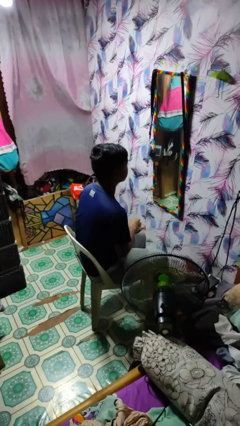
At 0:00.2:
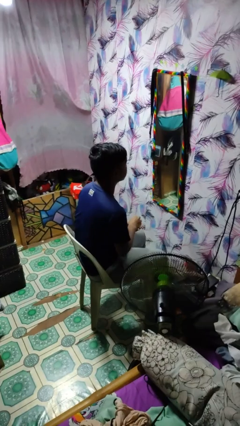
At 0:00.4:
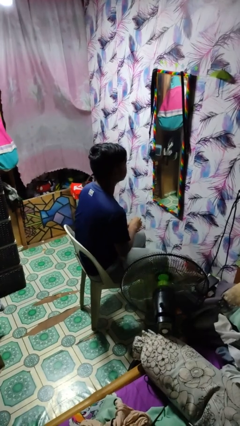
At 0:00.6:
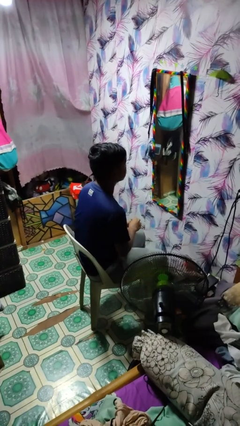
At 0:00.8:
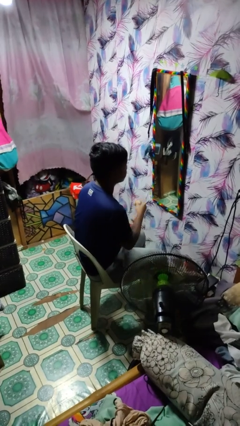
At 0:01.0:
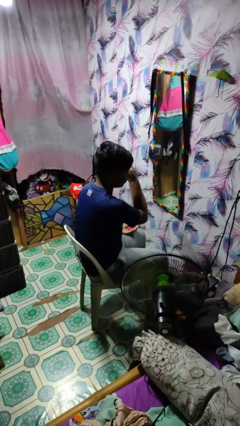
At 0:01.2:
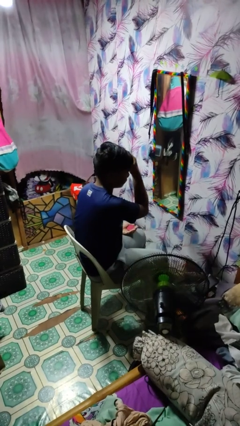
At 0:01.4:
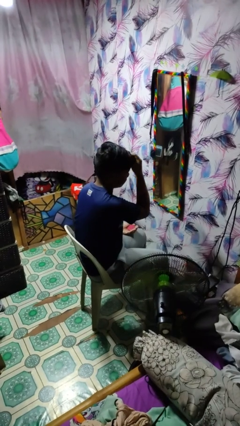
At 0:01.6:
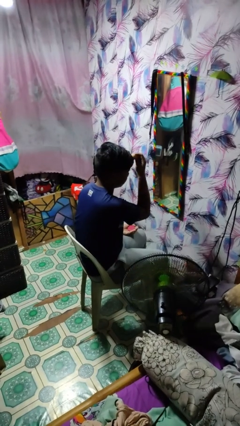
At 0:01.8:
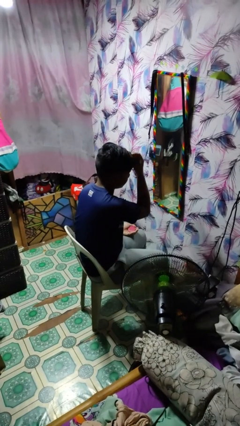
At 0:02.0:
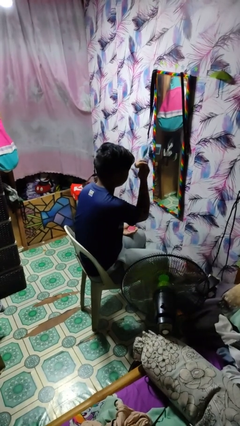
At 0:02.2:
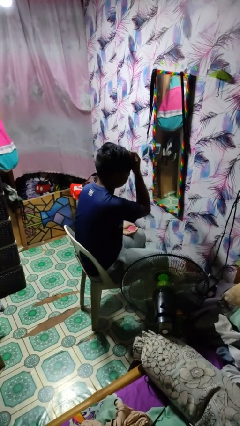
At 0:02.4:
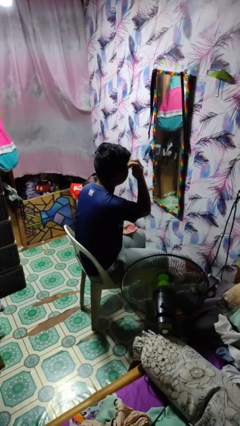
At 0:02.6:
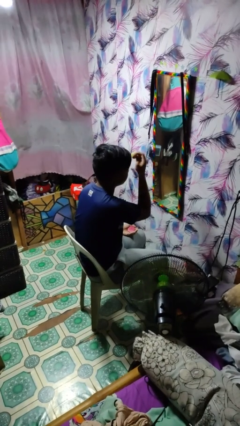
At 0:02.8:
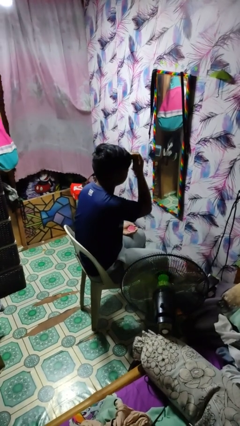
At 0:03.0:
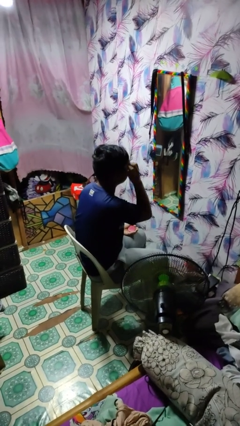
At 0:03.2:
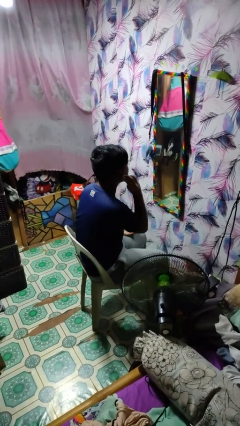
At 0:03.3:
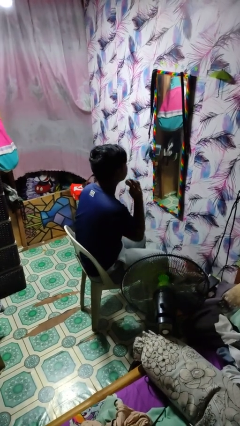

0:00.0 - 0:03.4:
person applies foundation makeup

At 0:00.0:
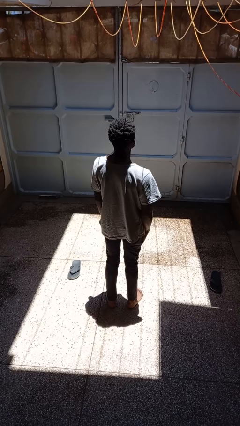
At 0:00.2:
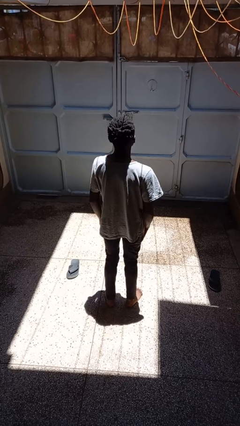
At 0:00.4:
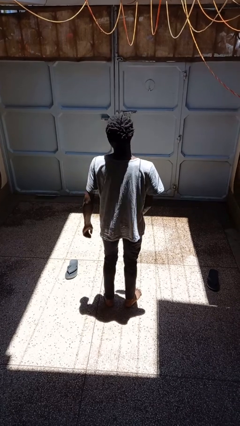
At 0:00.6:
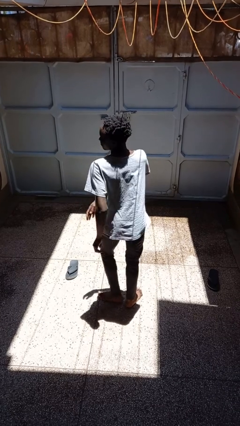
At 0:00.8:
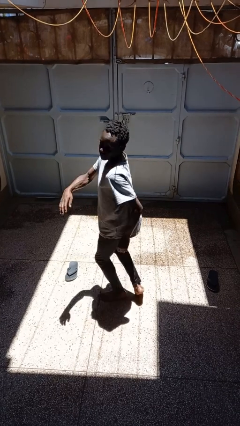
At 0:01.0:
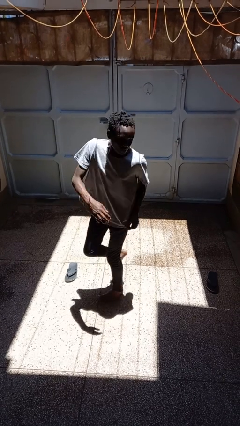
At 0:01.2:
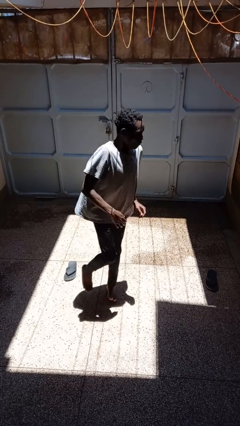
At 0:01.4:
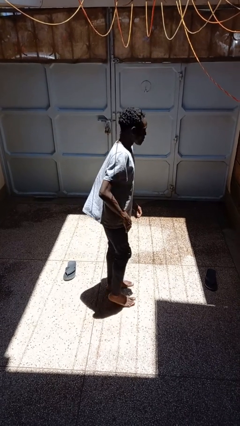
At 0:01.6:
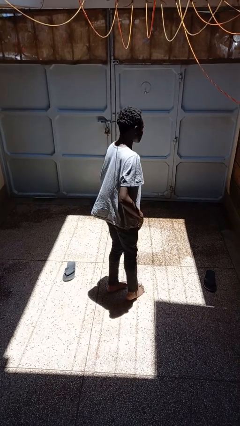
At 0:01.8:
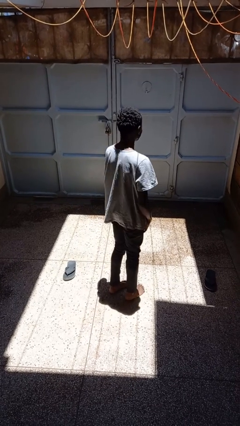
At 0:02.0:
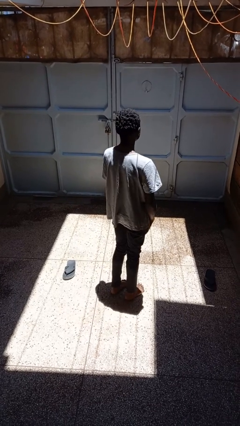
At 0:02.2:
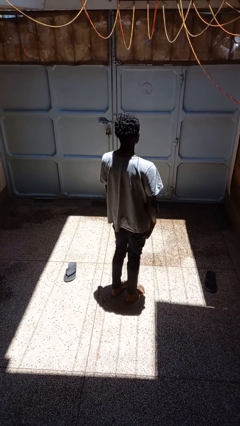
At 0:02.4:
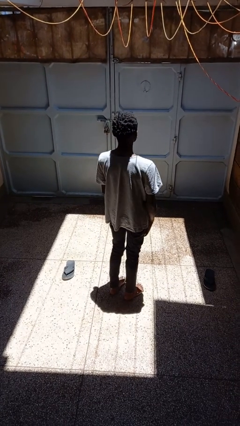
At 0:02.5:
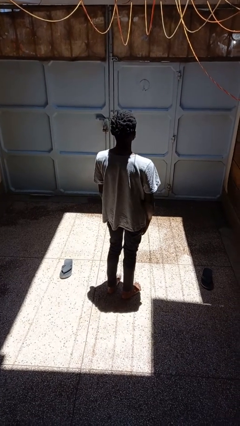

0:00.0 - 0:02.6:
person twirls

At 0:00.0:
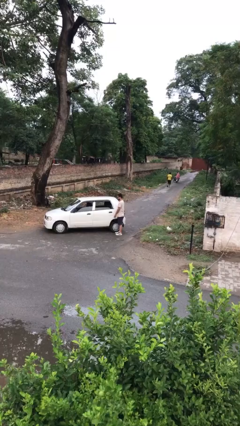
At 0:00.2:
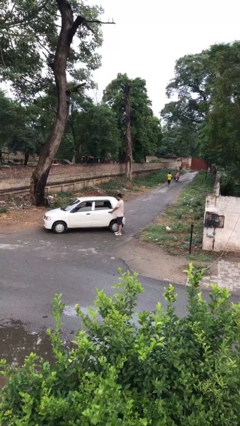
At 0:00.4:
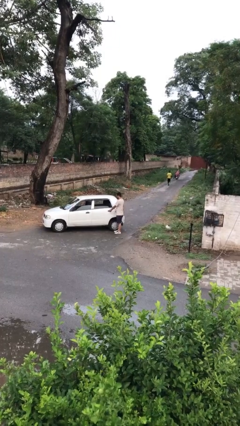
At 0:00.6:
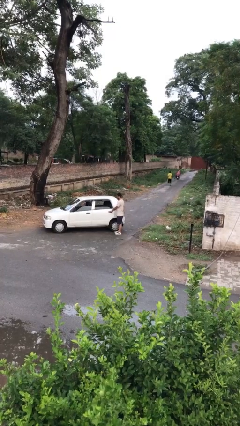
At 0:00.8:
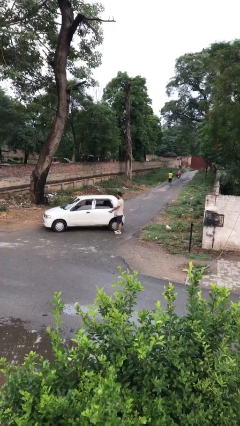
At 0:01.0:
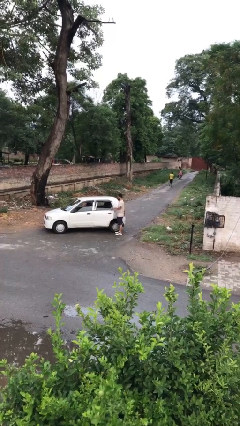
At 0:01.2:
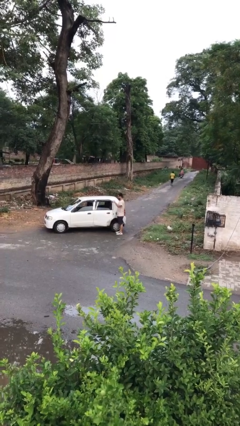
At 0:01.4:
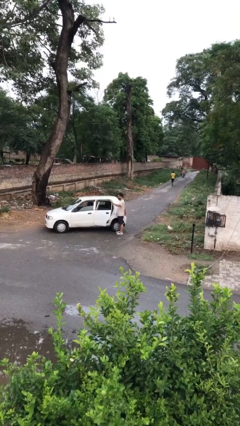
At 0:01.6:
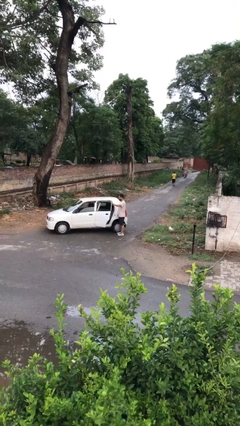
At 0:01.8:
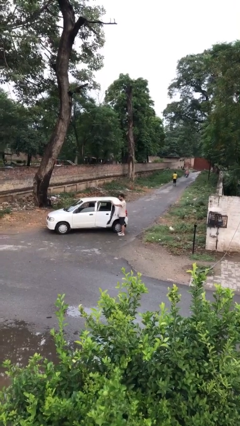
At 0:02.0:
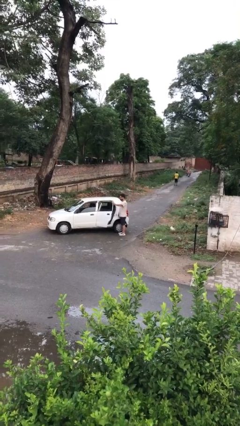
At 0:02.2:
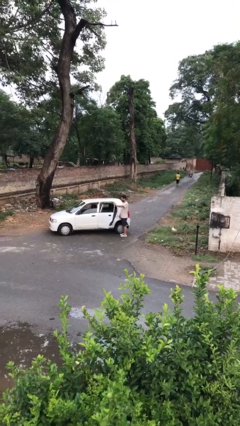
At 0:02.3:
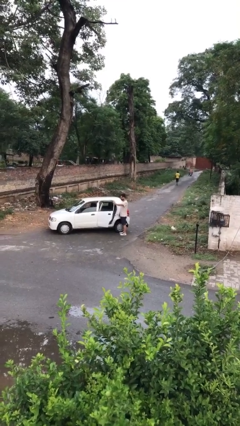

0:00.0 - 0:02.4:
person opens car door

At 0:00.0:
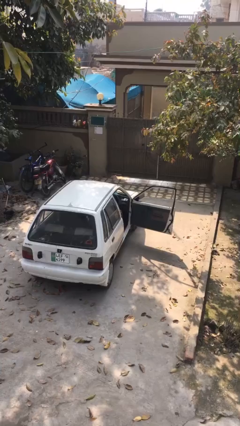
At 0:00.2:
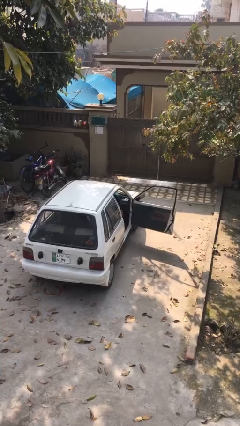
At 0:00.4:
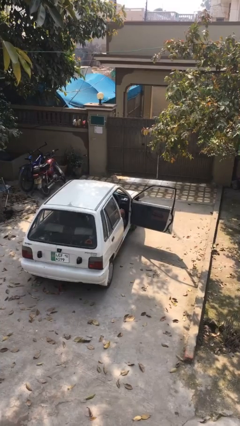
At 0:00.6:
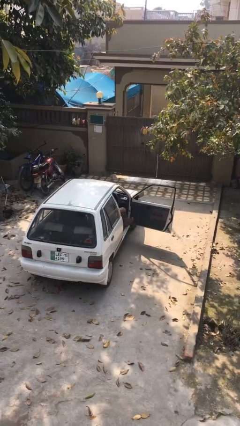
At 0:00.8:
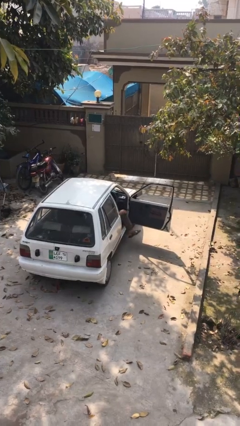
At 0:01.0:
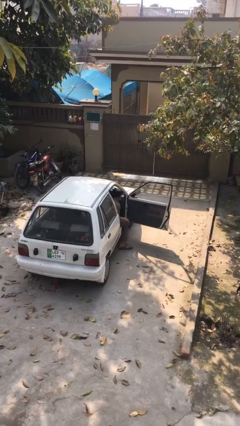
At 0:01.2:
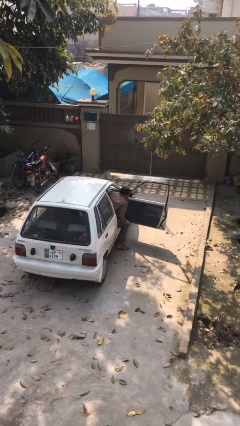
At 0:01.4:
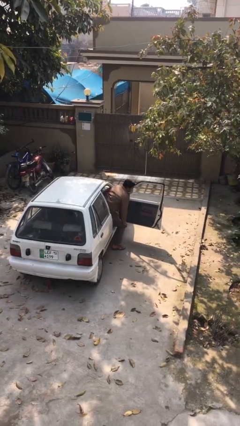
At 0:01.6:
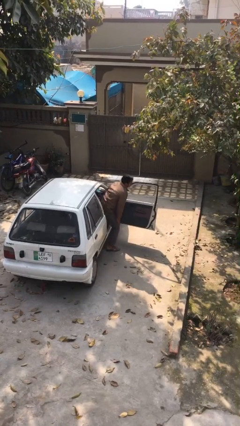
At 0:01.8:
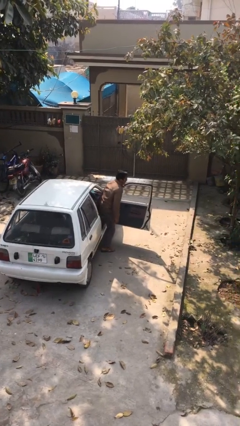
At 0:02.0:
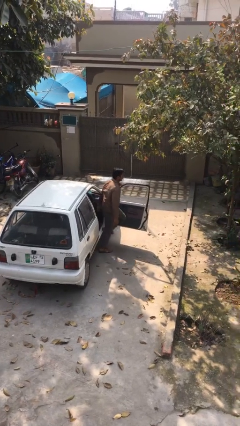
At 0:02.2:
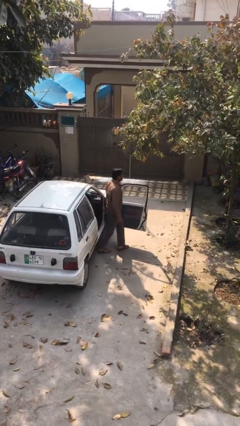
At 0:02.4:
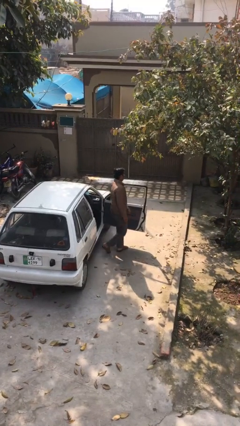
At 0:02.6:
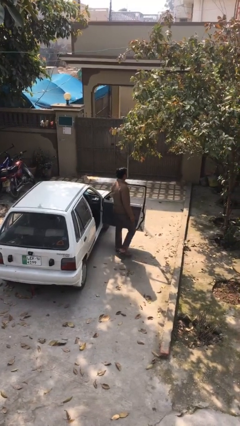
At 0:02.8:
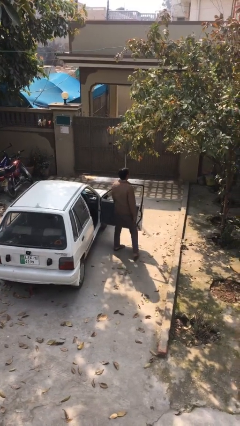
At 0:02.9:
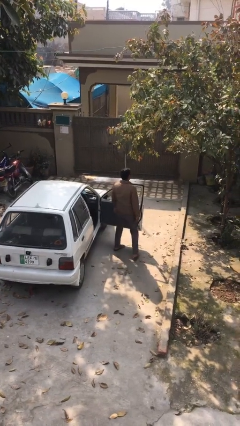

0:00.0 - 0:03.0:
person exits car

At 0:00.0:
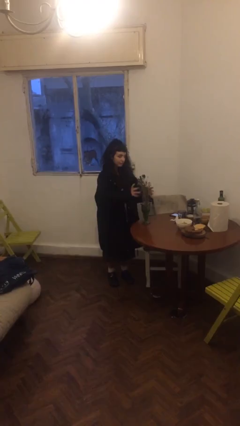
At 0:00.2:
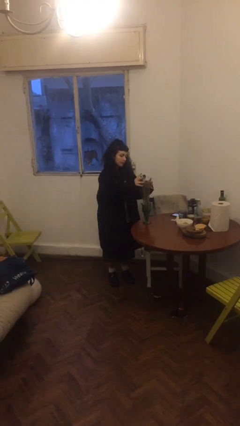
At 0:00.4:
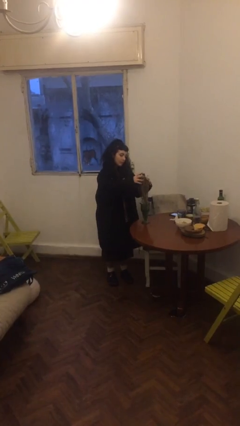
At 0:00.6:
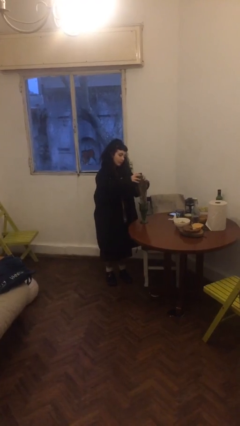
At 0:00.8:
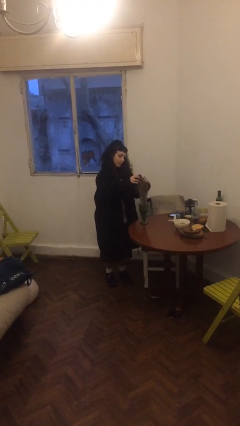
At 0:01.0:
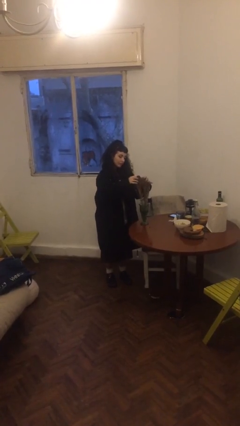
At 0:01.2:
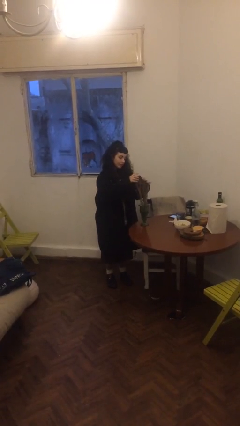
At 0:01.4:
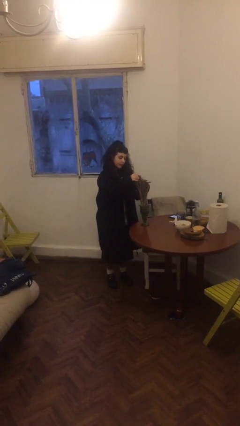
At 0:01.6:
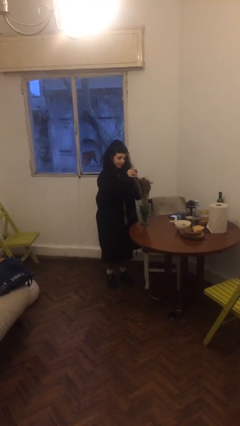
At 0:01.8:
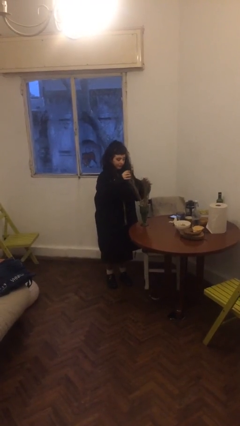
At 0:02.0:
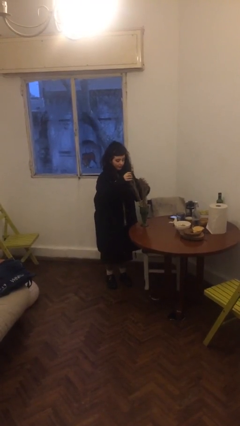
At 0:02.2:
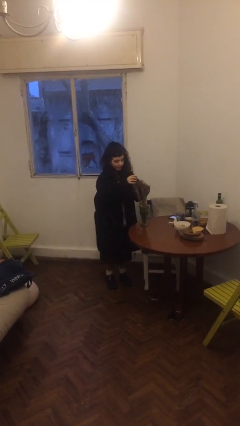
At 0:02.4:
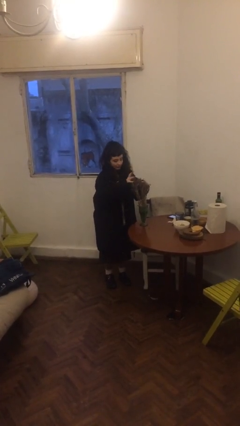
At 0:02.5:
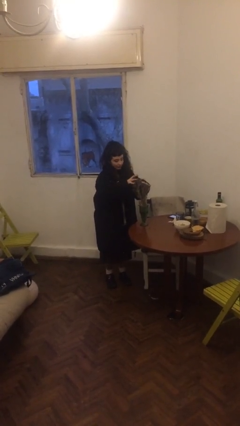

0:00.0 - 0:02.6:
person arranges flowers in vase

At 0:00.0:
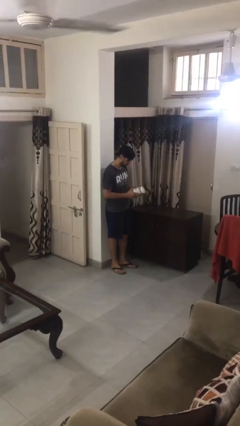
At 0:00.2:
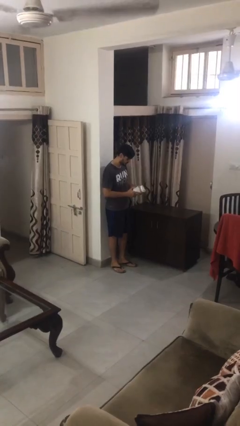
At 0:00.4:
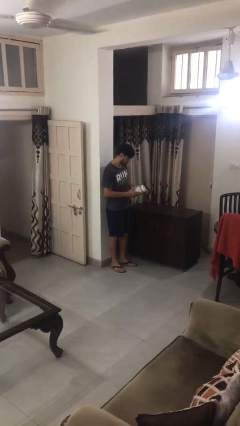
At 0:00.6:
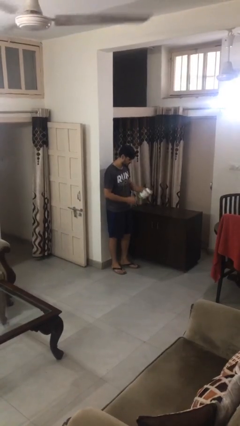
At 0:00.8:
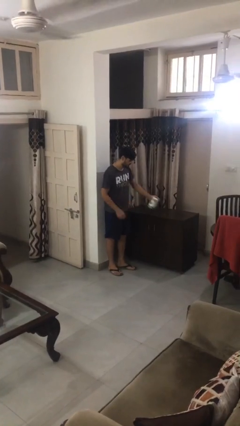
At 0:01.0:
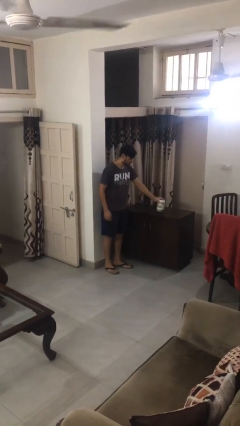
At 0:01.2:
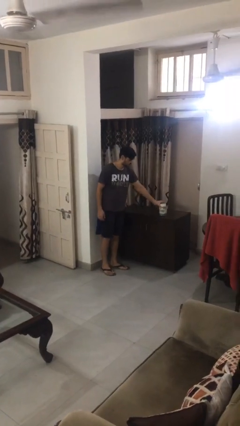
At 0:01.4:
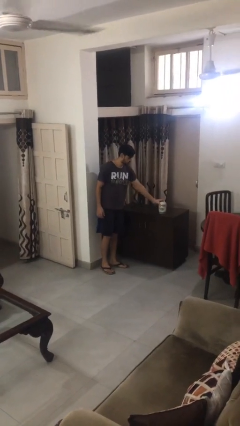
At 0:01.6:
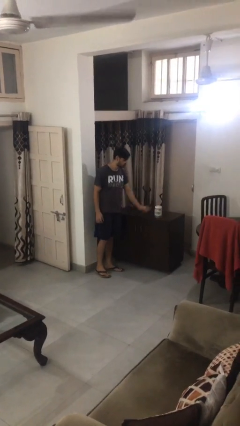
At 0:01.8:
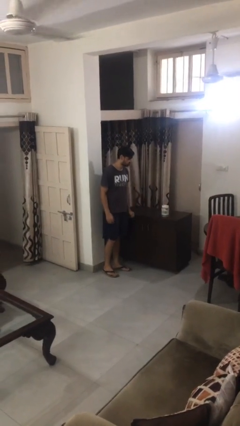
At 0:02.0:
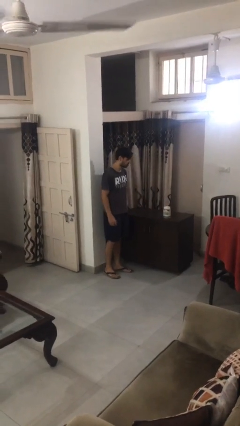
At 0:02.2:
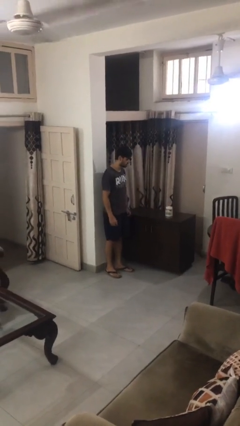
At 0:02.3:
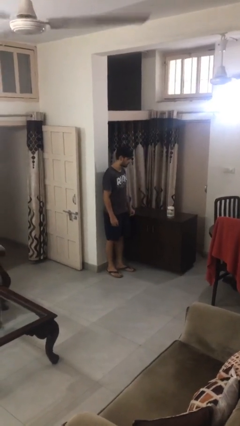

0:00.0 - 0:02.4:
person puts down object on countertop

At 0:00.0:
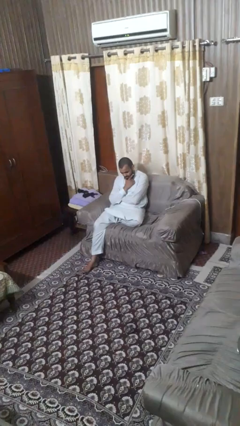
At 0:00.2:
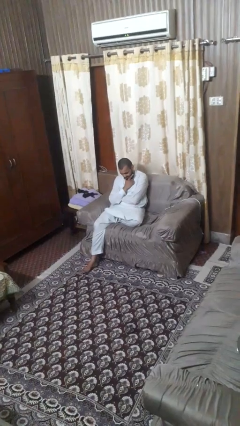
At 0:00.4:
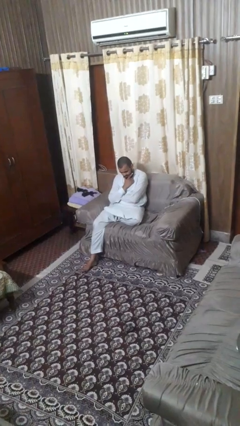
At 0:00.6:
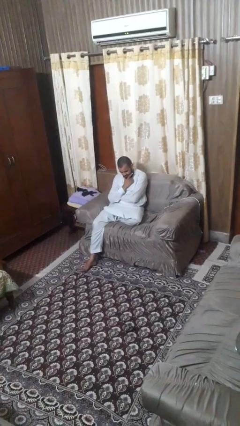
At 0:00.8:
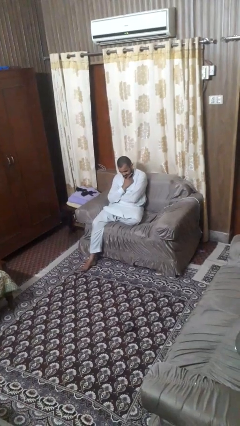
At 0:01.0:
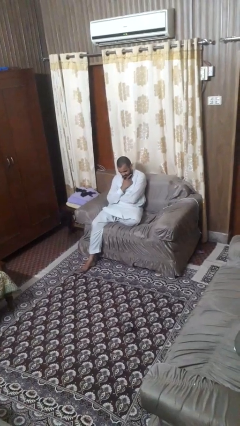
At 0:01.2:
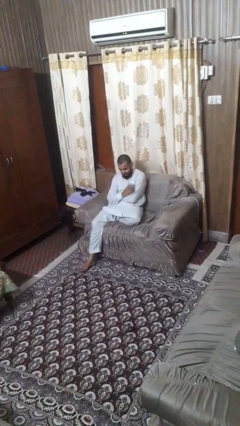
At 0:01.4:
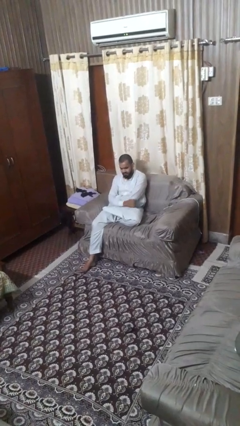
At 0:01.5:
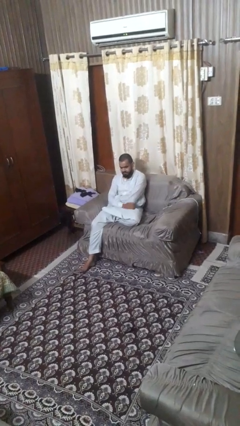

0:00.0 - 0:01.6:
person strokes chin
